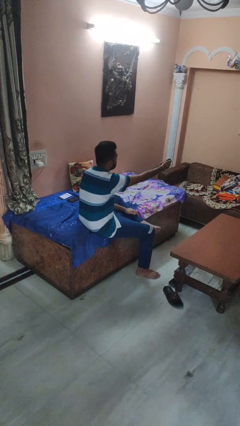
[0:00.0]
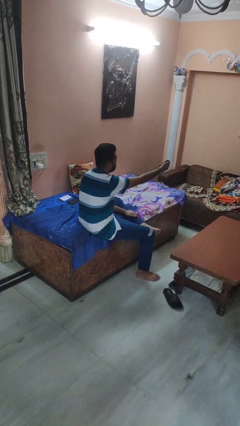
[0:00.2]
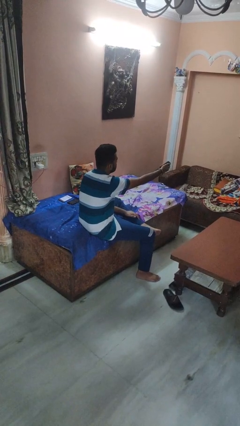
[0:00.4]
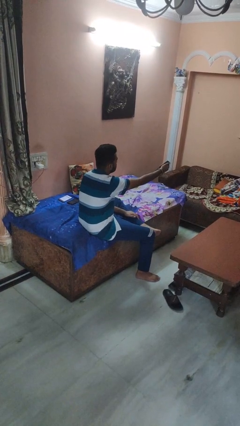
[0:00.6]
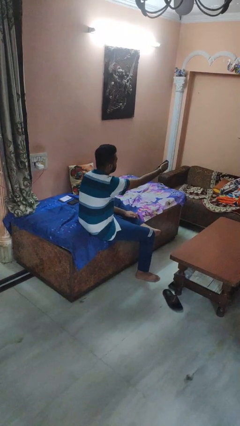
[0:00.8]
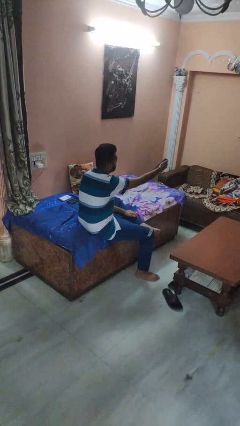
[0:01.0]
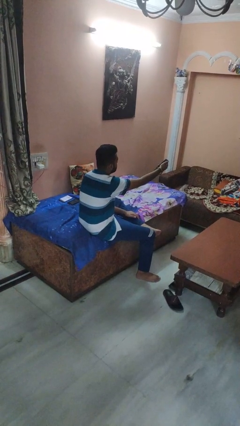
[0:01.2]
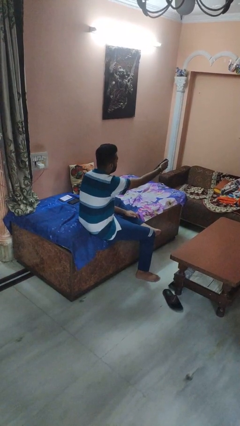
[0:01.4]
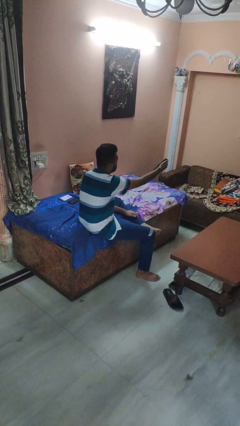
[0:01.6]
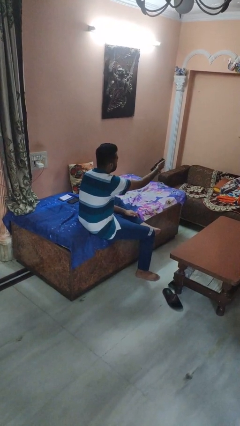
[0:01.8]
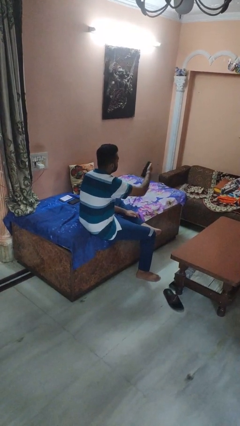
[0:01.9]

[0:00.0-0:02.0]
person uses television remote

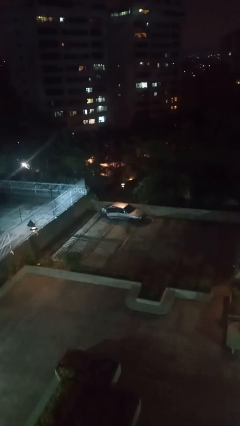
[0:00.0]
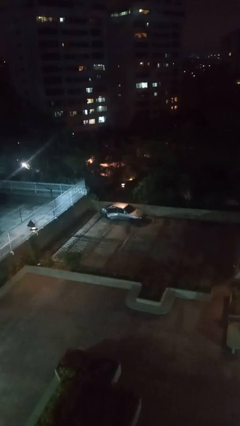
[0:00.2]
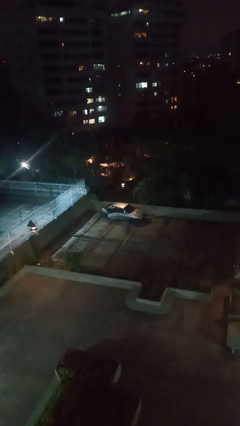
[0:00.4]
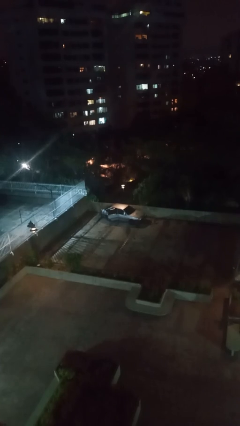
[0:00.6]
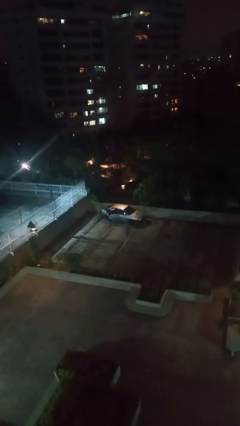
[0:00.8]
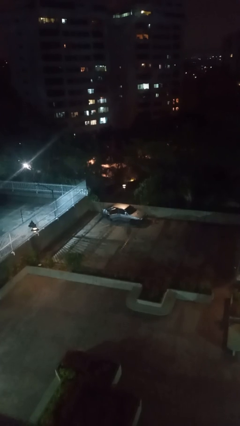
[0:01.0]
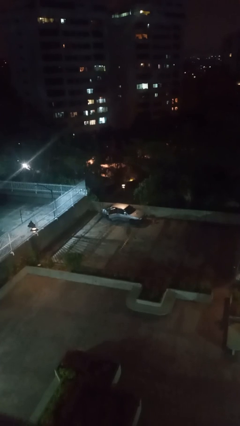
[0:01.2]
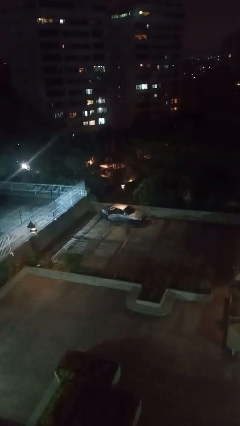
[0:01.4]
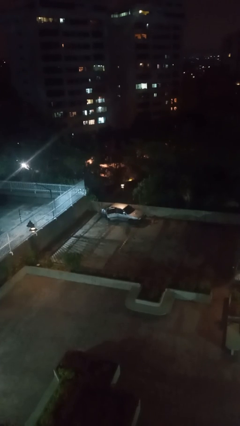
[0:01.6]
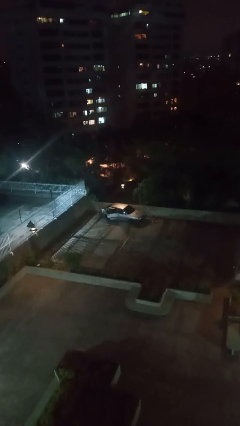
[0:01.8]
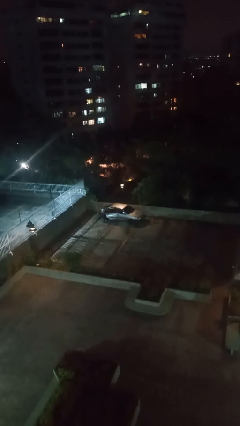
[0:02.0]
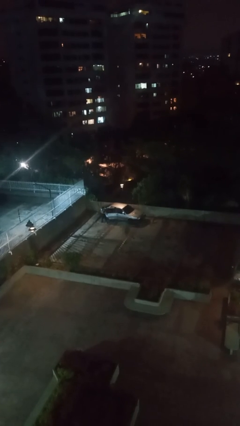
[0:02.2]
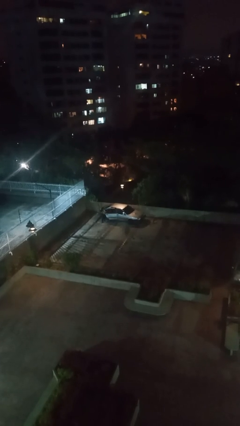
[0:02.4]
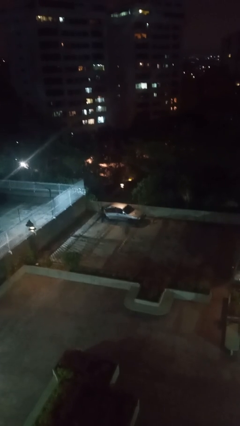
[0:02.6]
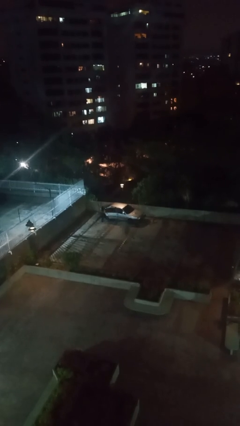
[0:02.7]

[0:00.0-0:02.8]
car drops off person

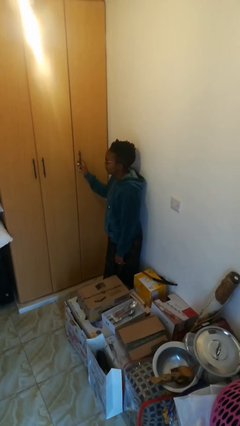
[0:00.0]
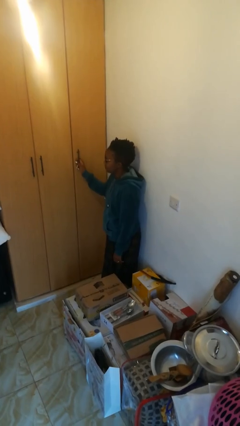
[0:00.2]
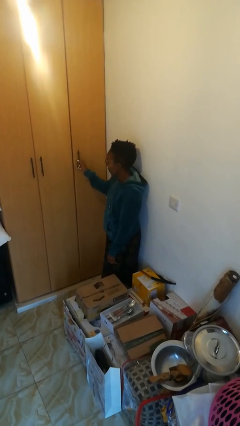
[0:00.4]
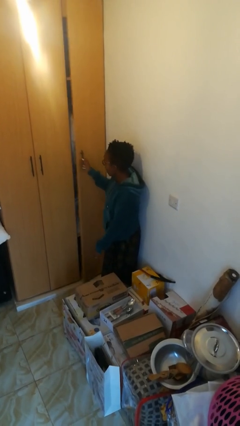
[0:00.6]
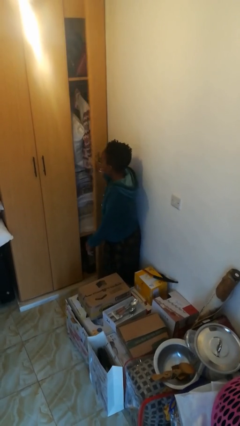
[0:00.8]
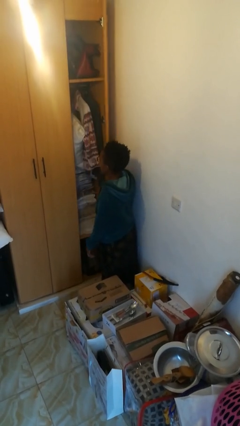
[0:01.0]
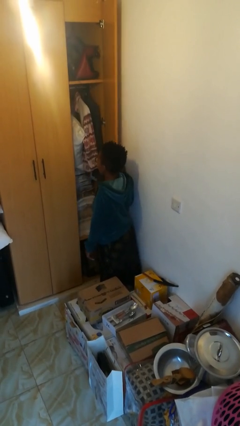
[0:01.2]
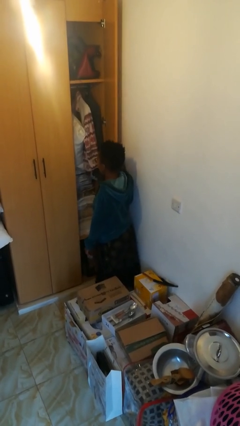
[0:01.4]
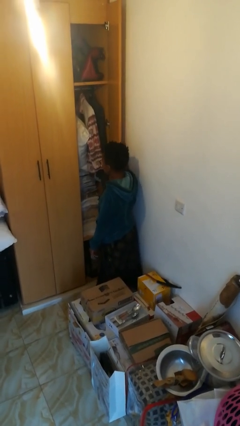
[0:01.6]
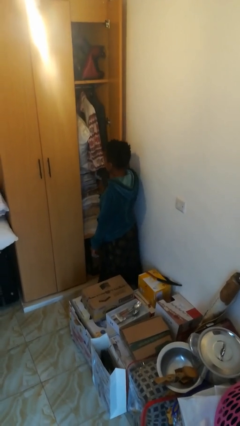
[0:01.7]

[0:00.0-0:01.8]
person opens closet door

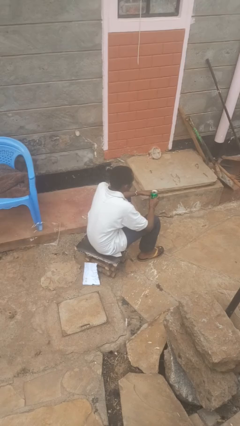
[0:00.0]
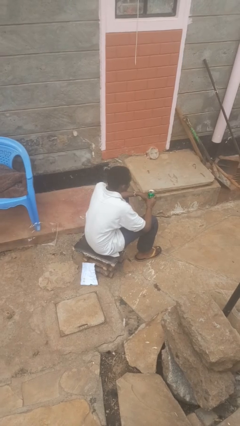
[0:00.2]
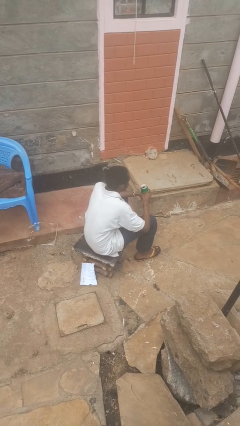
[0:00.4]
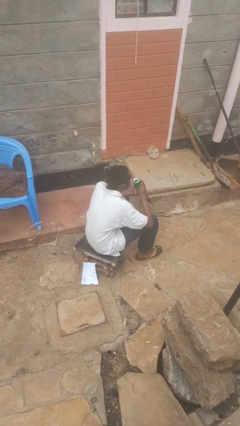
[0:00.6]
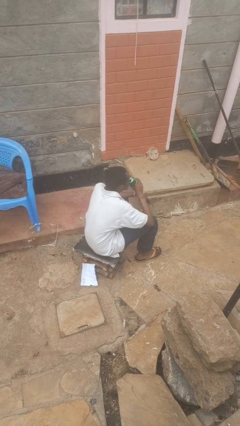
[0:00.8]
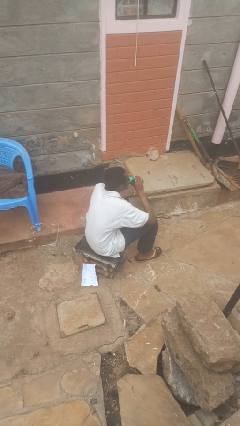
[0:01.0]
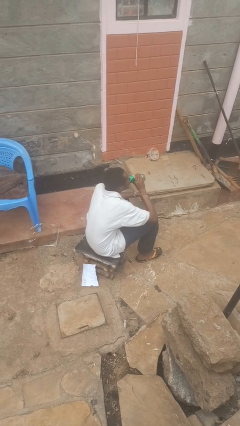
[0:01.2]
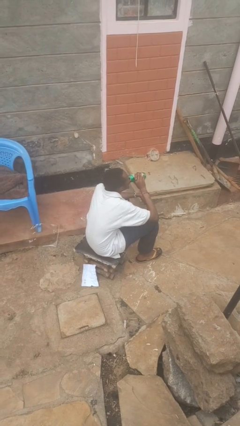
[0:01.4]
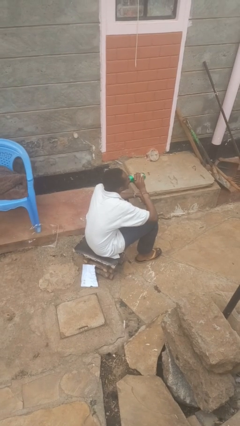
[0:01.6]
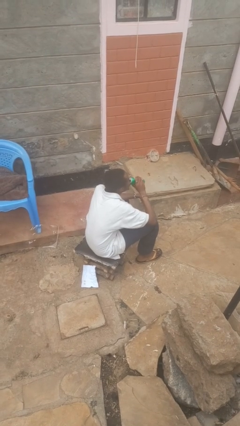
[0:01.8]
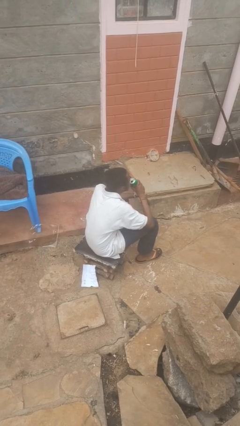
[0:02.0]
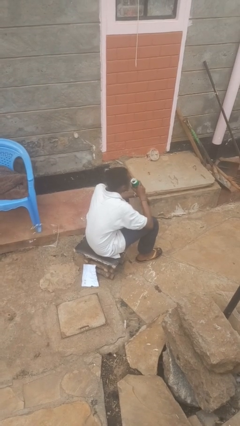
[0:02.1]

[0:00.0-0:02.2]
person drinks from beverage can

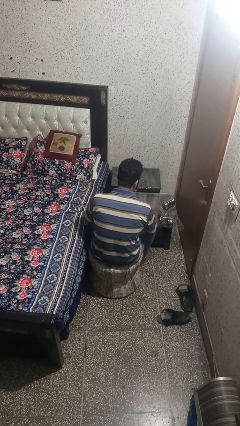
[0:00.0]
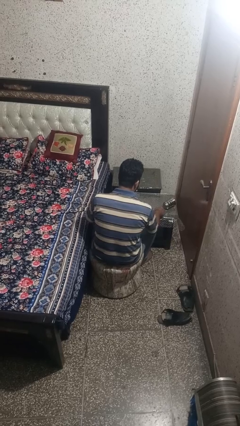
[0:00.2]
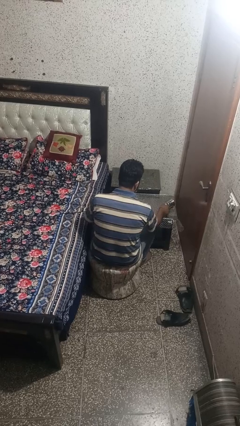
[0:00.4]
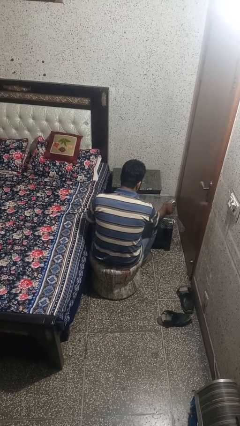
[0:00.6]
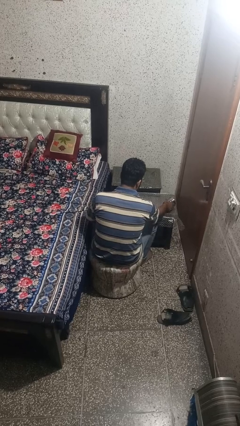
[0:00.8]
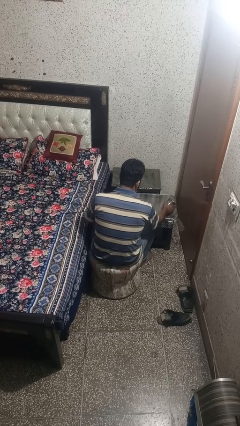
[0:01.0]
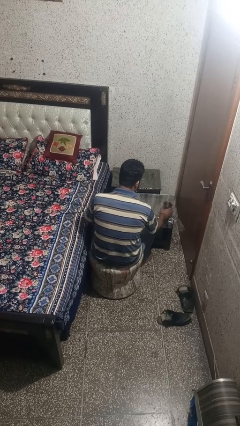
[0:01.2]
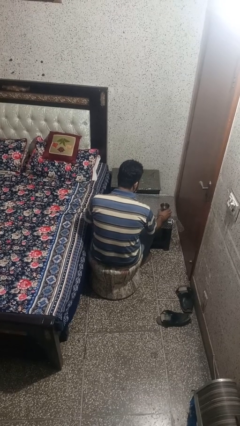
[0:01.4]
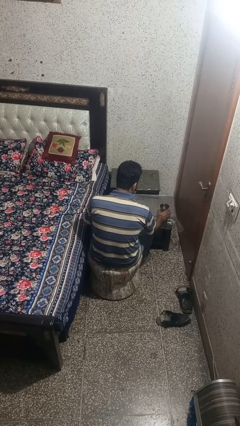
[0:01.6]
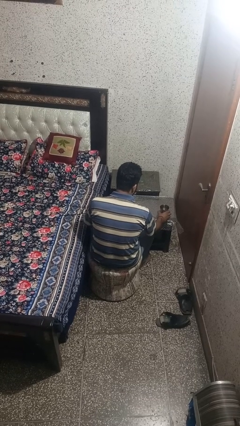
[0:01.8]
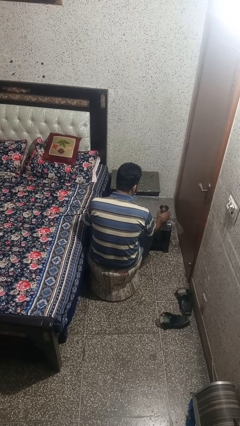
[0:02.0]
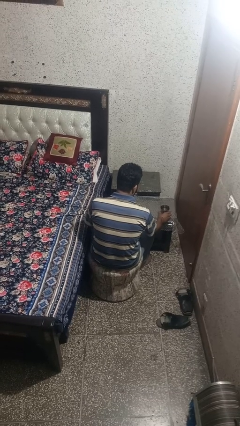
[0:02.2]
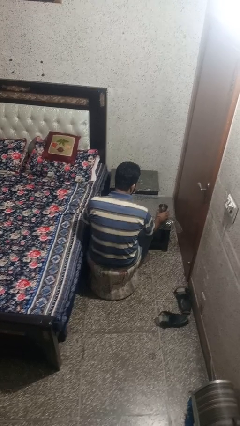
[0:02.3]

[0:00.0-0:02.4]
person sets upright glass

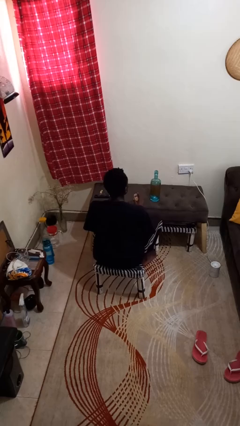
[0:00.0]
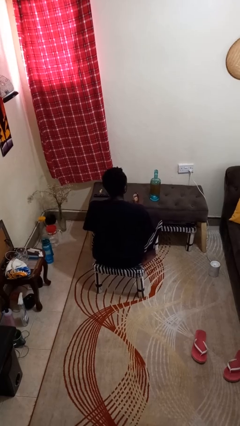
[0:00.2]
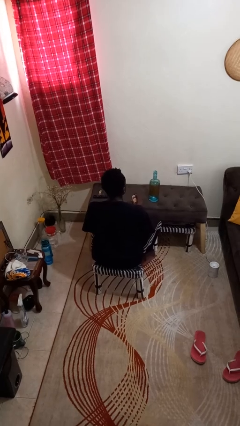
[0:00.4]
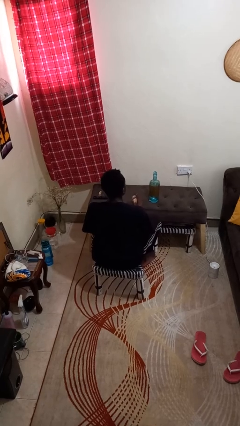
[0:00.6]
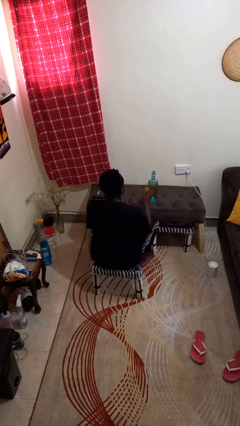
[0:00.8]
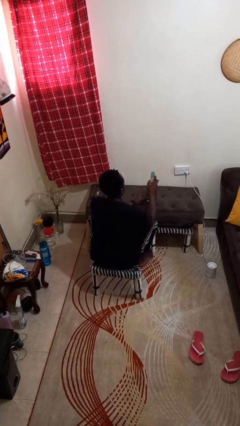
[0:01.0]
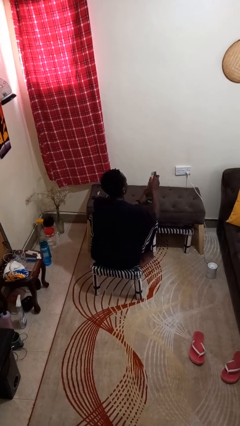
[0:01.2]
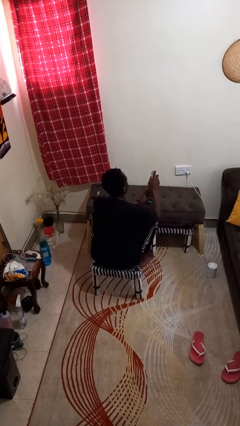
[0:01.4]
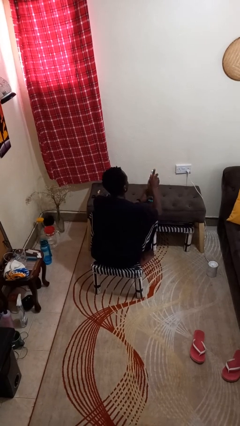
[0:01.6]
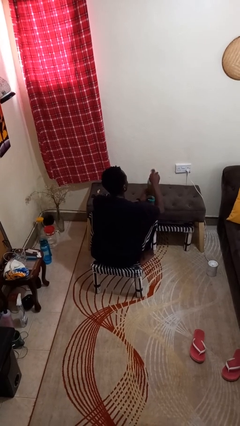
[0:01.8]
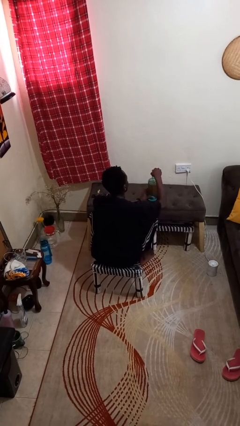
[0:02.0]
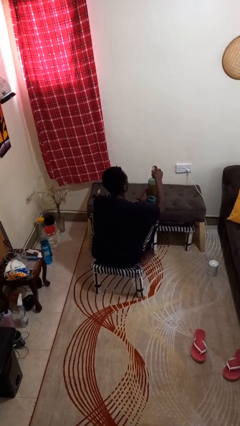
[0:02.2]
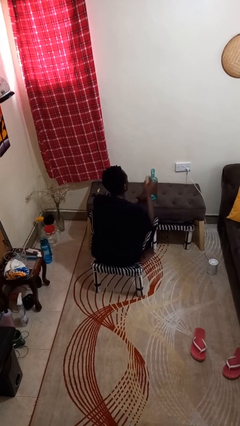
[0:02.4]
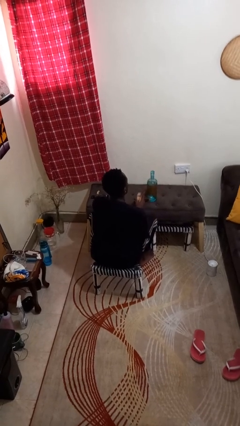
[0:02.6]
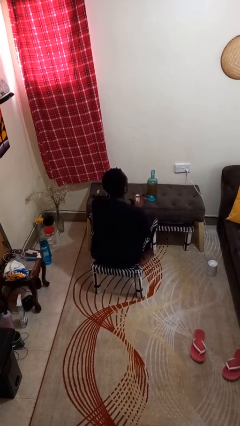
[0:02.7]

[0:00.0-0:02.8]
person opens can with can opener

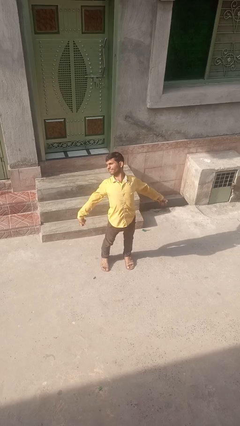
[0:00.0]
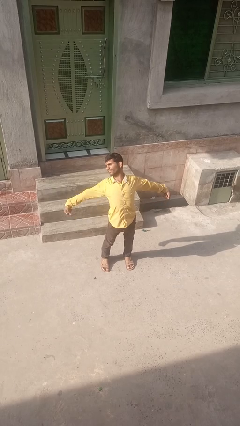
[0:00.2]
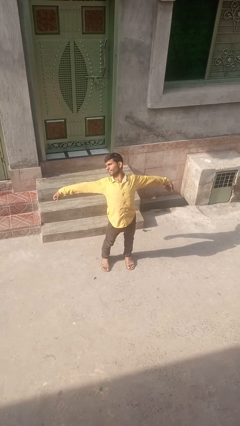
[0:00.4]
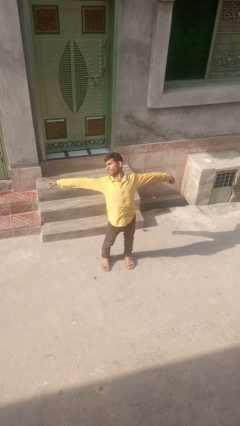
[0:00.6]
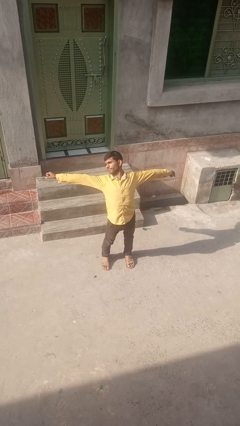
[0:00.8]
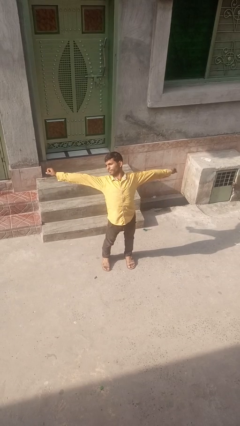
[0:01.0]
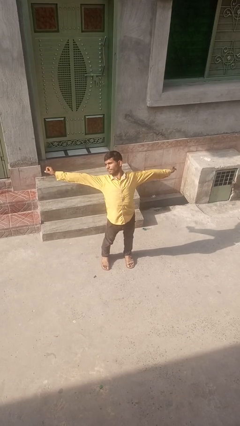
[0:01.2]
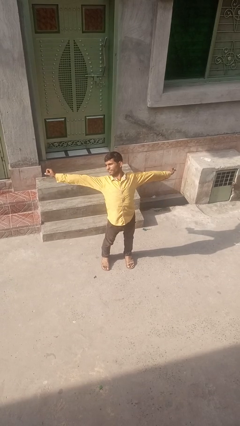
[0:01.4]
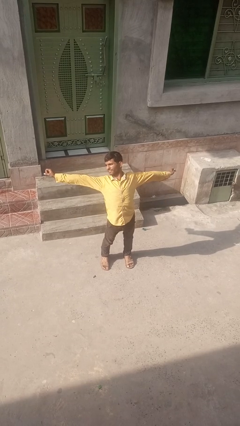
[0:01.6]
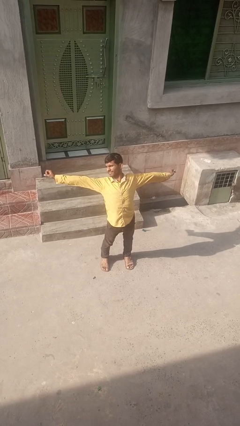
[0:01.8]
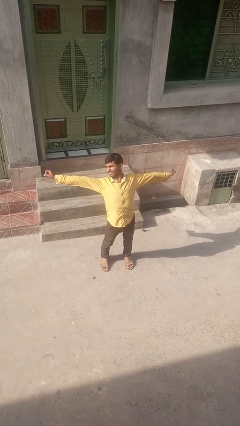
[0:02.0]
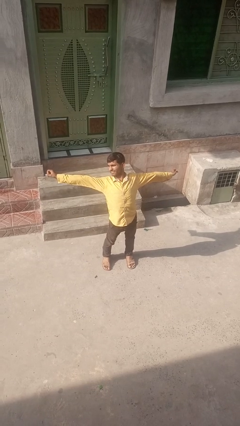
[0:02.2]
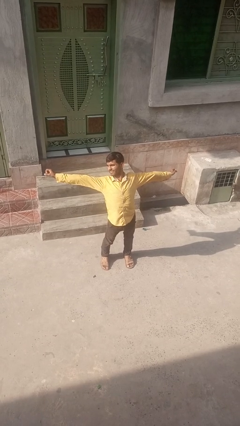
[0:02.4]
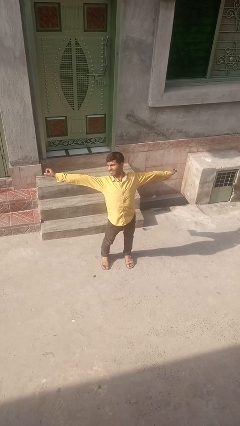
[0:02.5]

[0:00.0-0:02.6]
person stretches arms to side

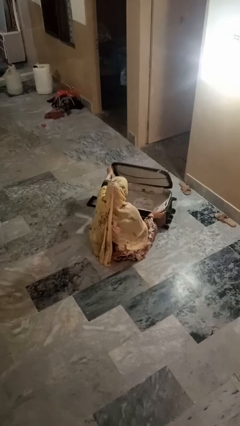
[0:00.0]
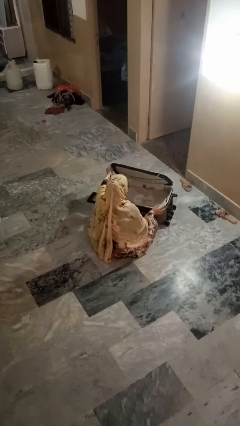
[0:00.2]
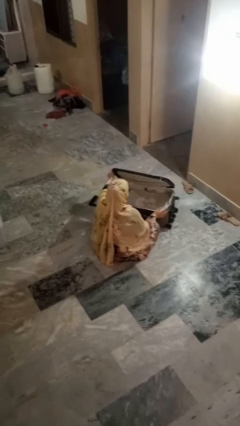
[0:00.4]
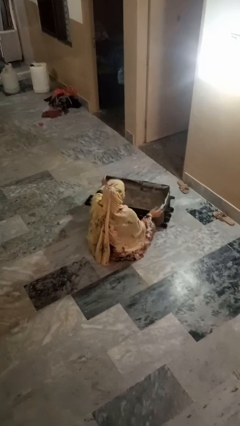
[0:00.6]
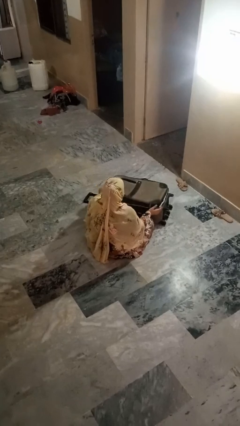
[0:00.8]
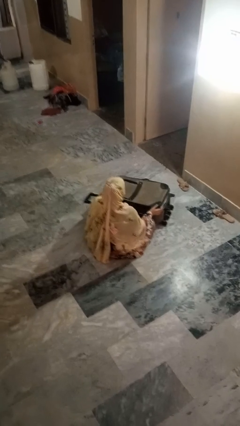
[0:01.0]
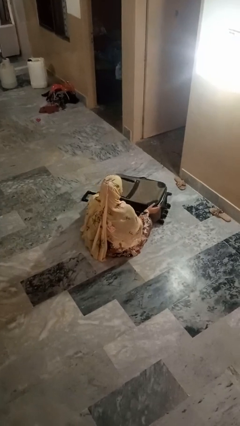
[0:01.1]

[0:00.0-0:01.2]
person closes suitcase
